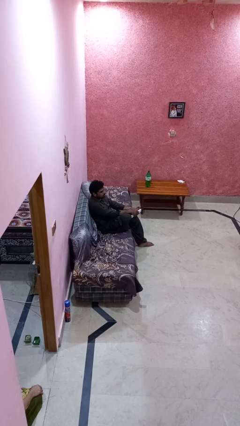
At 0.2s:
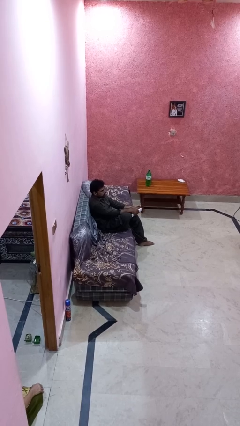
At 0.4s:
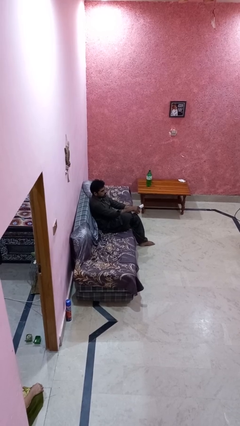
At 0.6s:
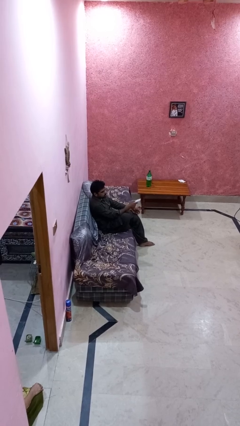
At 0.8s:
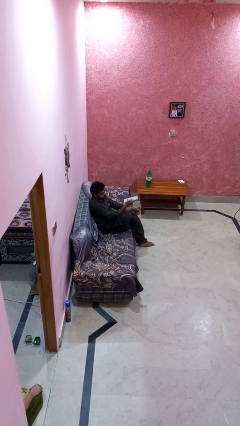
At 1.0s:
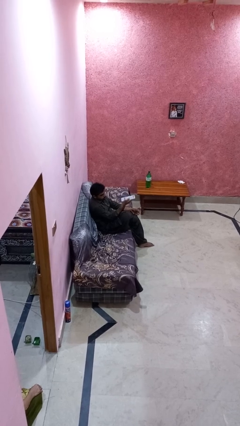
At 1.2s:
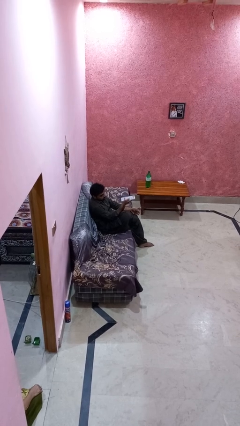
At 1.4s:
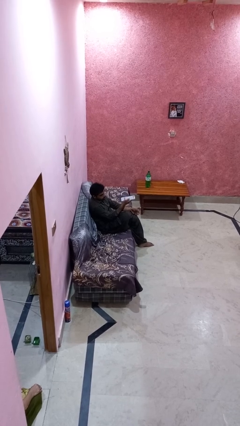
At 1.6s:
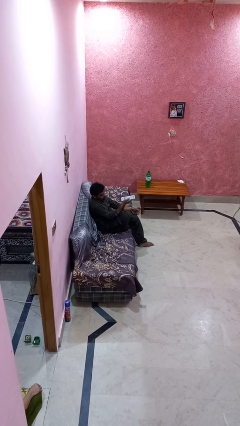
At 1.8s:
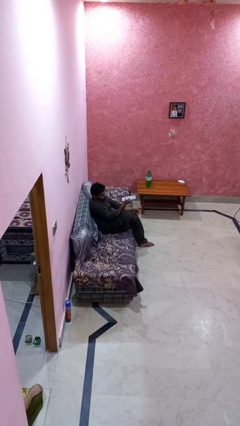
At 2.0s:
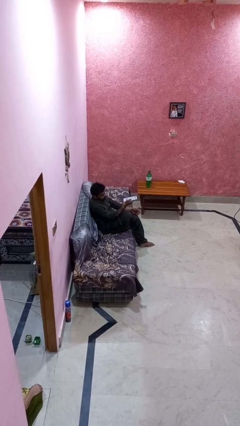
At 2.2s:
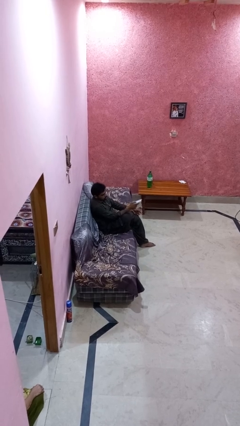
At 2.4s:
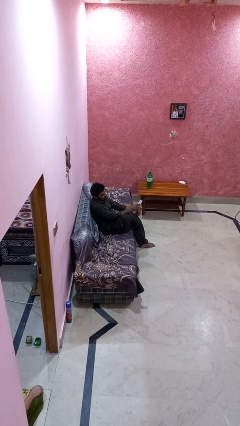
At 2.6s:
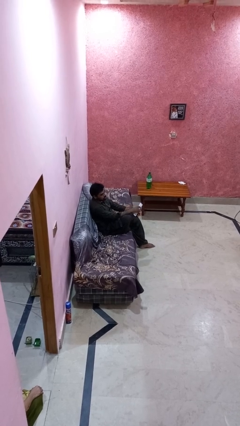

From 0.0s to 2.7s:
person uses television remote

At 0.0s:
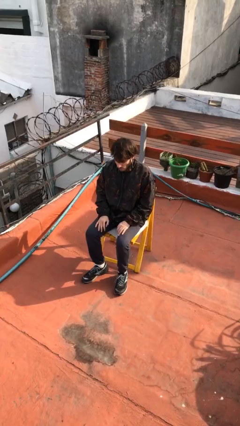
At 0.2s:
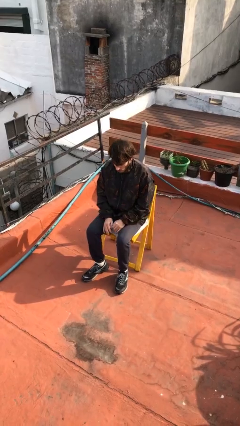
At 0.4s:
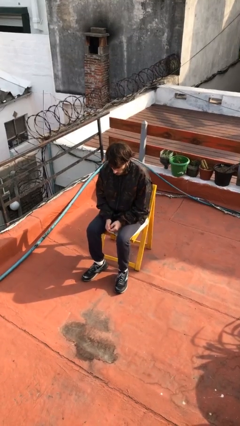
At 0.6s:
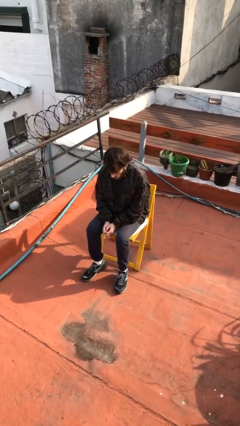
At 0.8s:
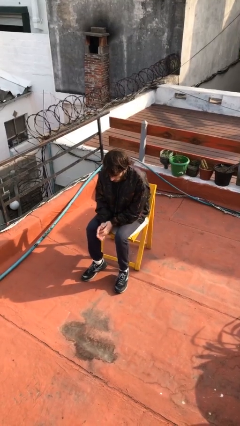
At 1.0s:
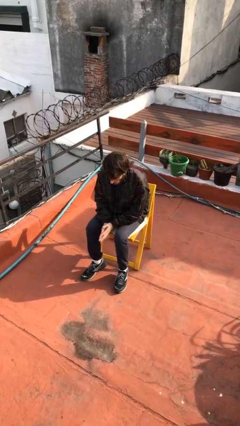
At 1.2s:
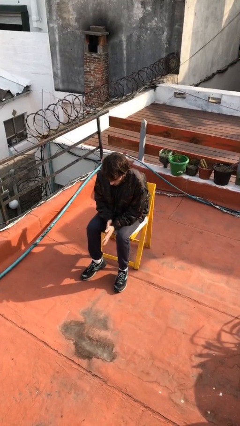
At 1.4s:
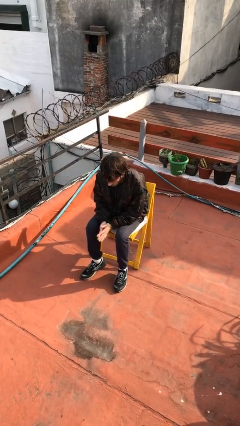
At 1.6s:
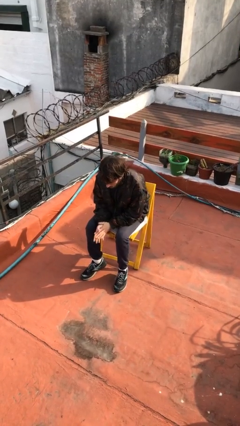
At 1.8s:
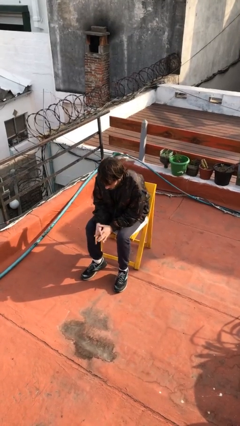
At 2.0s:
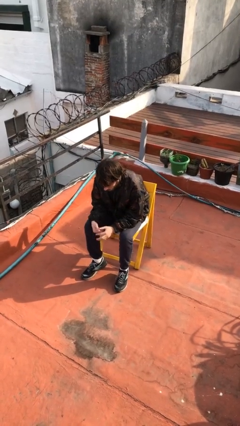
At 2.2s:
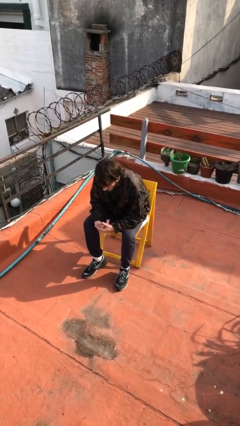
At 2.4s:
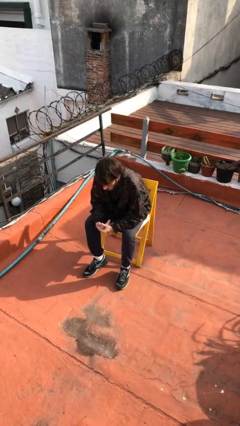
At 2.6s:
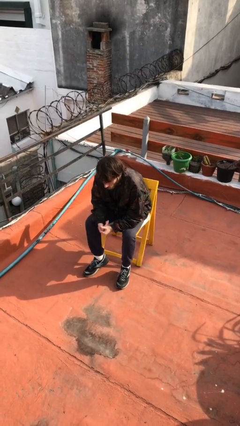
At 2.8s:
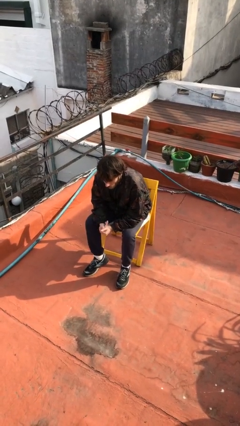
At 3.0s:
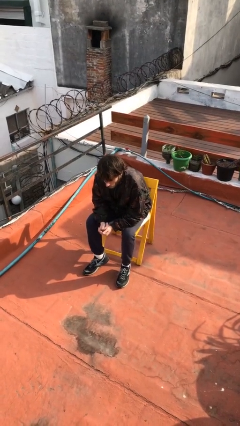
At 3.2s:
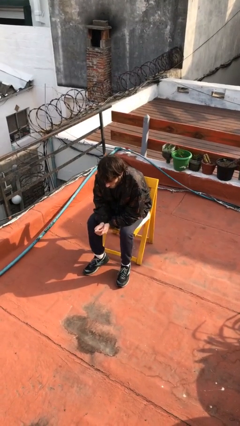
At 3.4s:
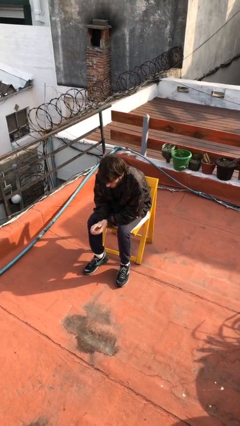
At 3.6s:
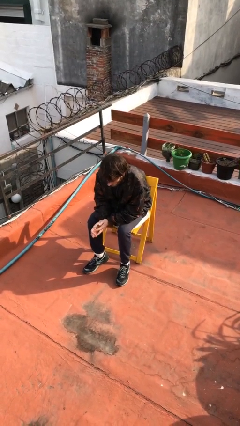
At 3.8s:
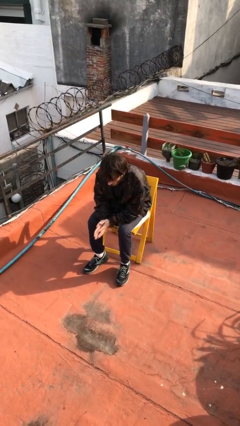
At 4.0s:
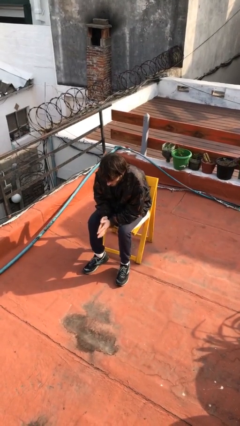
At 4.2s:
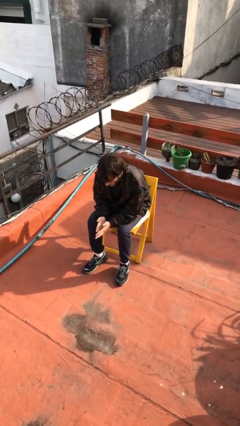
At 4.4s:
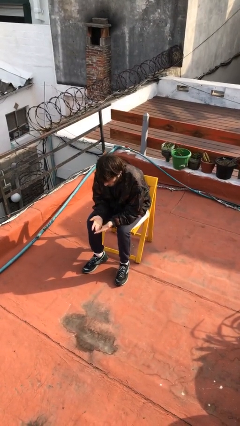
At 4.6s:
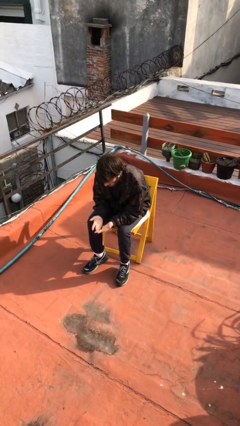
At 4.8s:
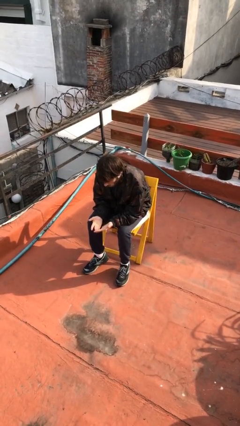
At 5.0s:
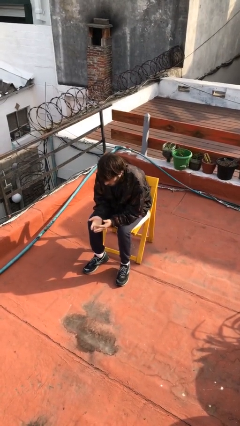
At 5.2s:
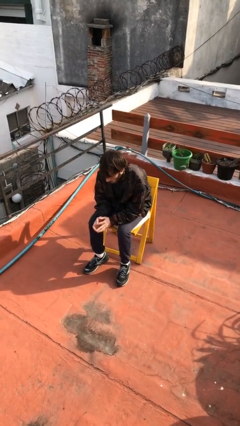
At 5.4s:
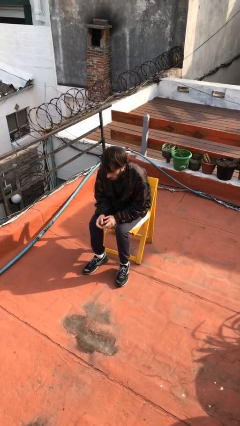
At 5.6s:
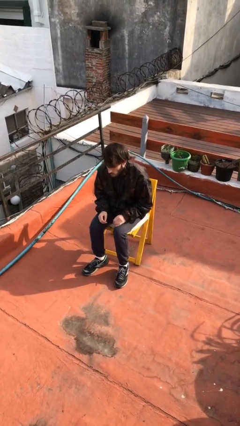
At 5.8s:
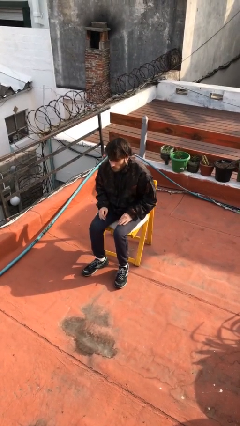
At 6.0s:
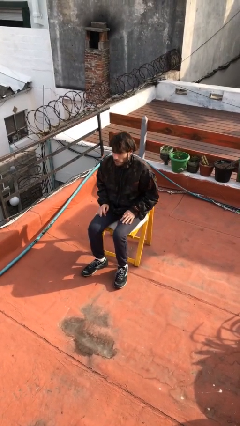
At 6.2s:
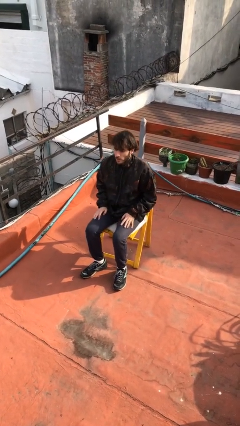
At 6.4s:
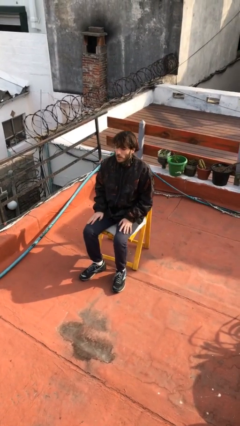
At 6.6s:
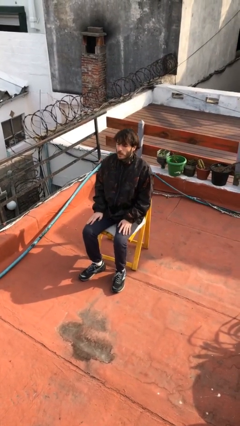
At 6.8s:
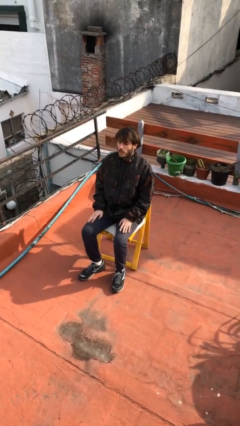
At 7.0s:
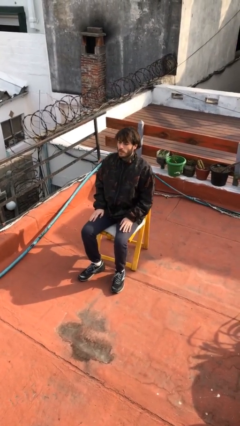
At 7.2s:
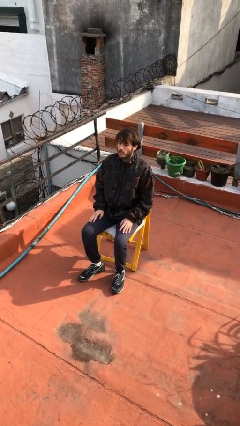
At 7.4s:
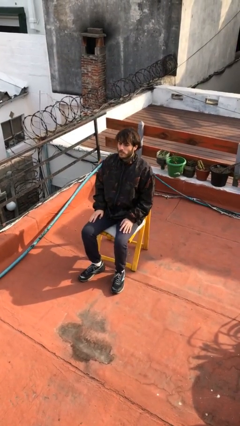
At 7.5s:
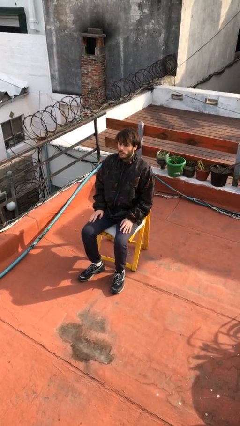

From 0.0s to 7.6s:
person looks at hands in lap

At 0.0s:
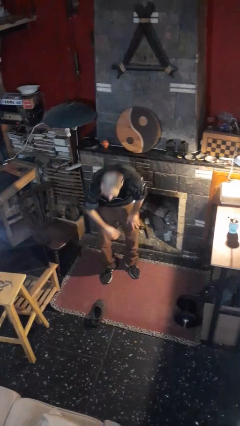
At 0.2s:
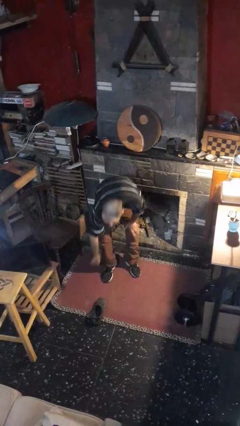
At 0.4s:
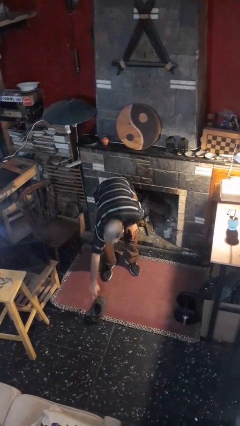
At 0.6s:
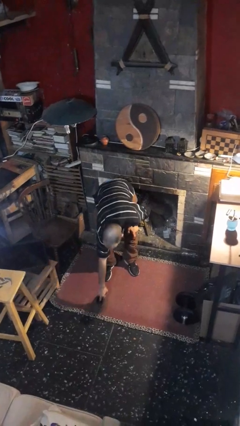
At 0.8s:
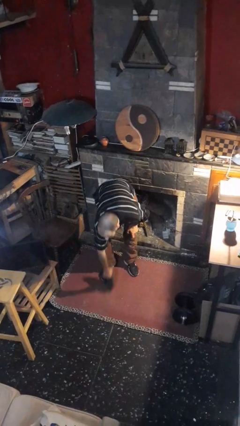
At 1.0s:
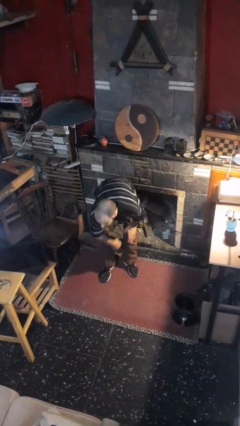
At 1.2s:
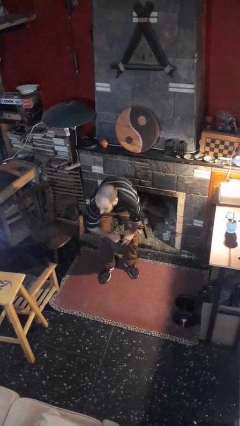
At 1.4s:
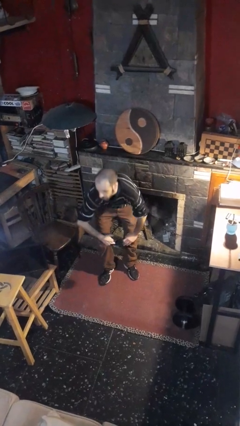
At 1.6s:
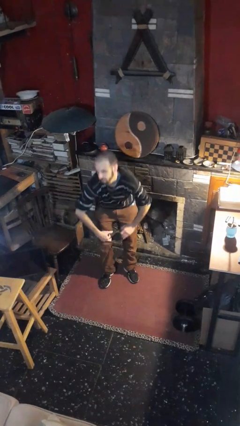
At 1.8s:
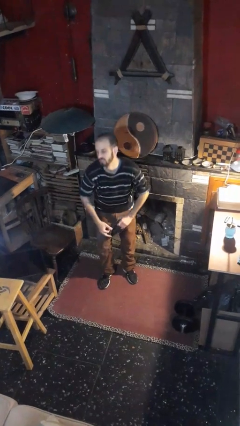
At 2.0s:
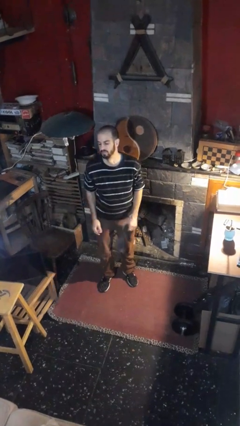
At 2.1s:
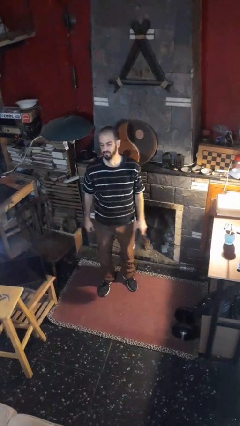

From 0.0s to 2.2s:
person picks up object from floor

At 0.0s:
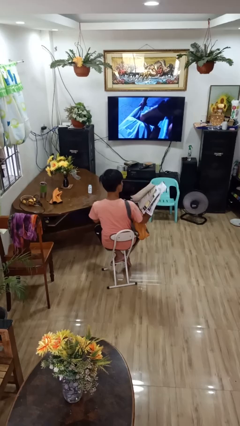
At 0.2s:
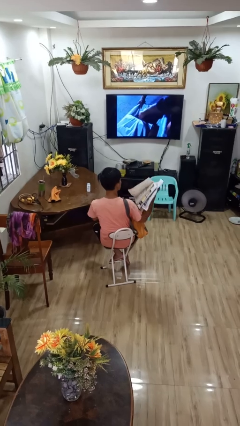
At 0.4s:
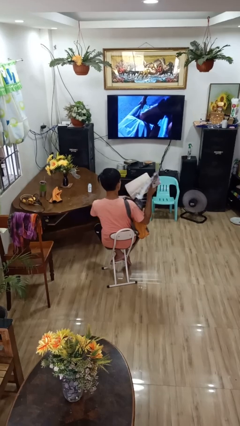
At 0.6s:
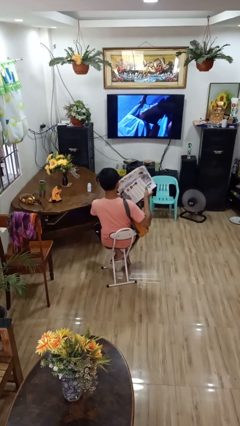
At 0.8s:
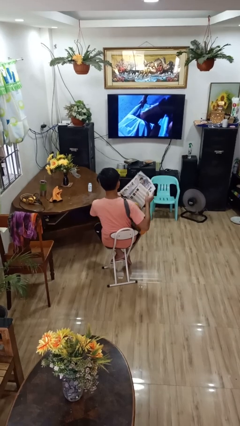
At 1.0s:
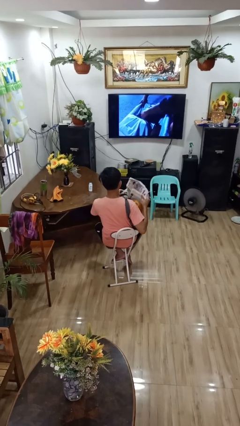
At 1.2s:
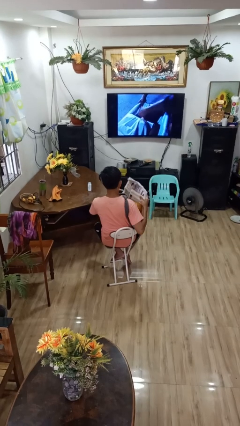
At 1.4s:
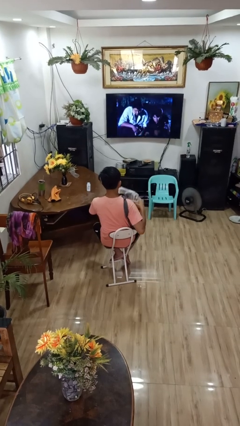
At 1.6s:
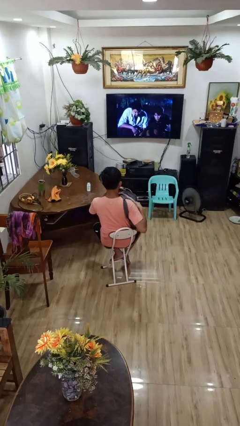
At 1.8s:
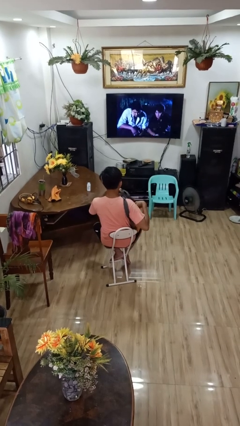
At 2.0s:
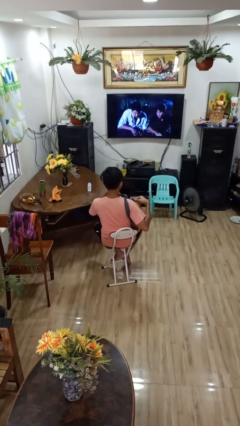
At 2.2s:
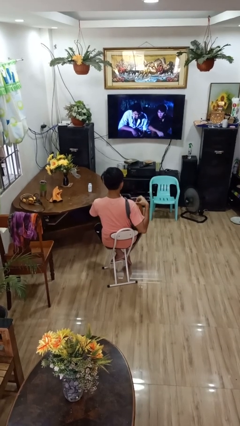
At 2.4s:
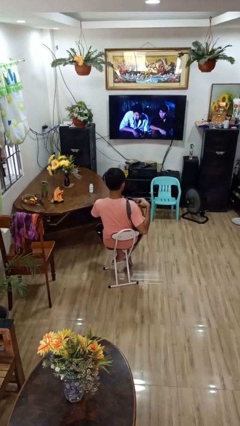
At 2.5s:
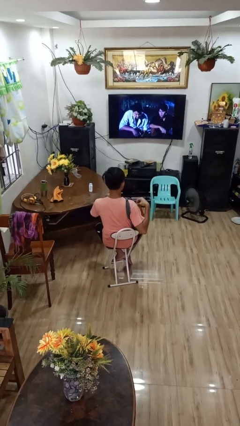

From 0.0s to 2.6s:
person puts object into backpack

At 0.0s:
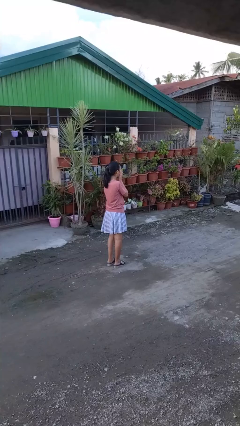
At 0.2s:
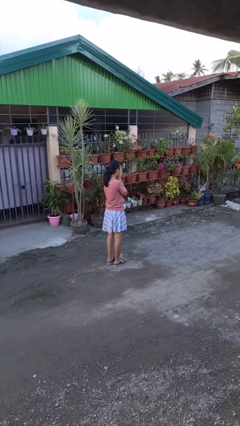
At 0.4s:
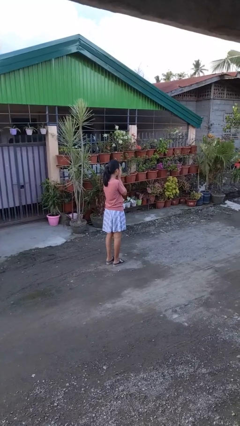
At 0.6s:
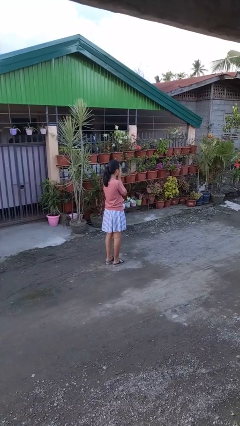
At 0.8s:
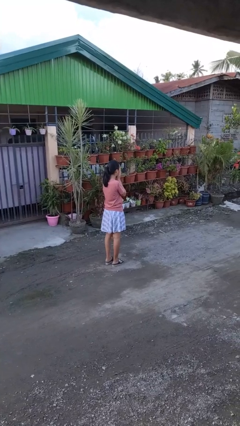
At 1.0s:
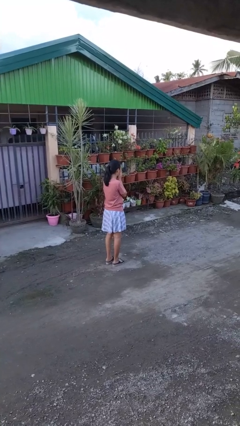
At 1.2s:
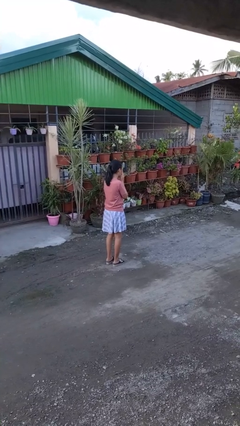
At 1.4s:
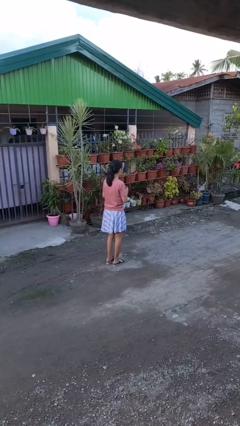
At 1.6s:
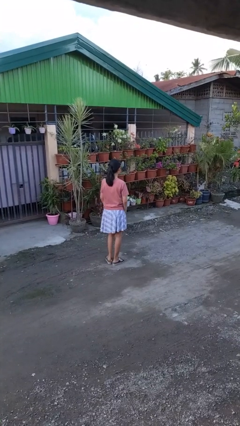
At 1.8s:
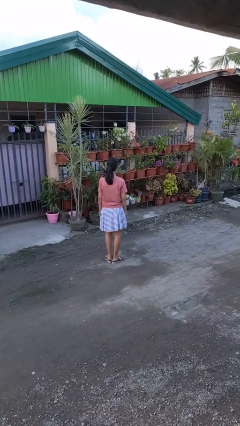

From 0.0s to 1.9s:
person blows into hands

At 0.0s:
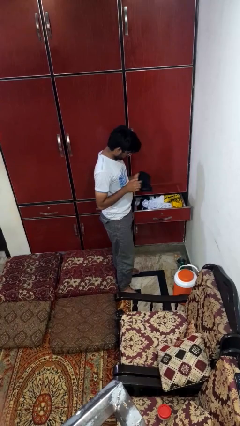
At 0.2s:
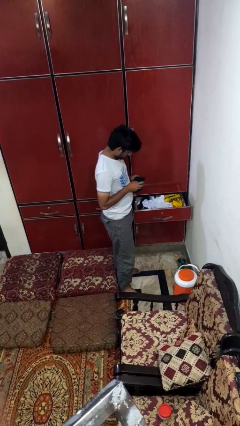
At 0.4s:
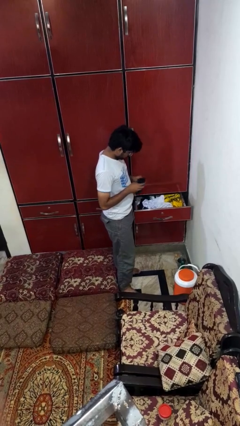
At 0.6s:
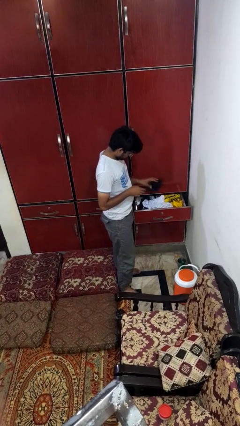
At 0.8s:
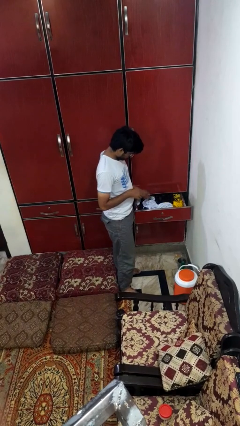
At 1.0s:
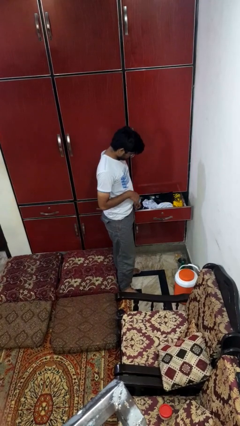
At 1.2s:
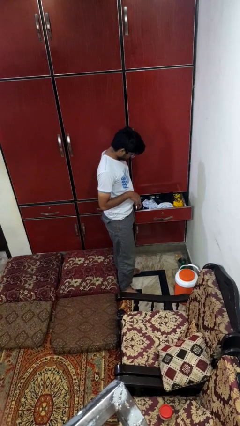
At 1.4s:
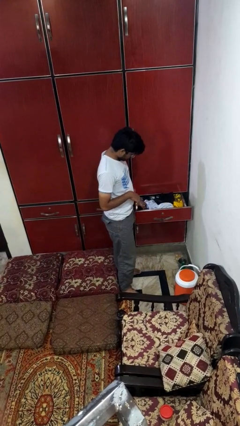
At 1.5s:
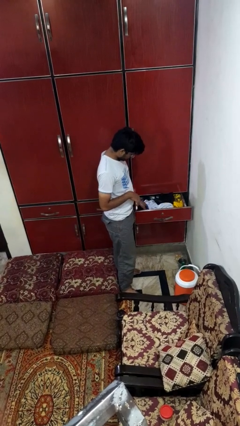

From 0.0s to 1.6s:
person puts clothes into dresser
